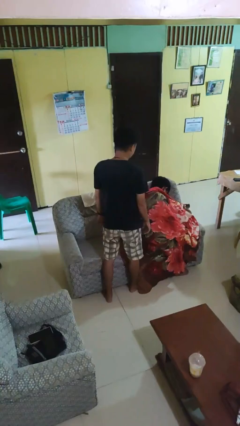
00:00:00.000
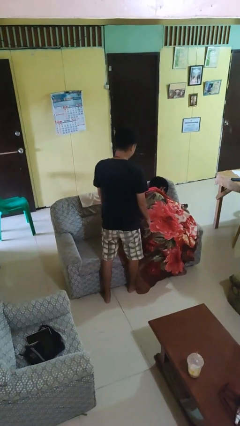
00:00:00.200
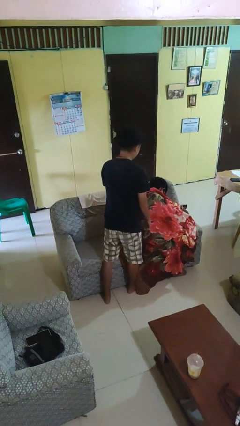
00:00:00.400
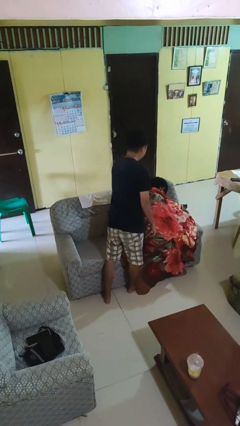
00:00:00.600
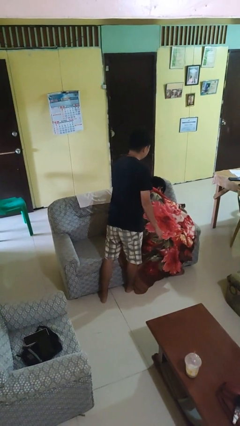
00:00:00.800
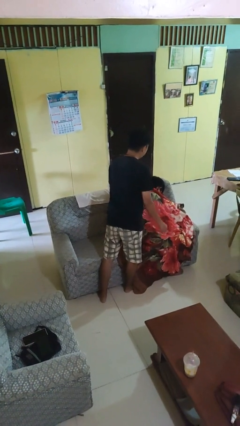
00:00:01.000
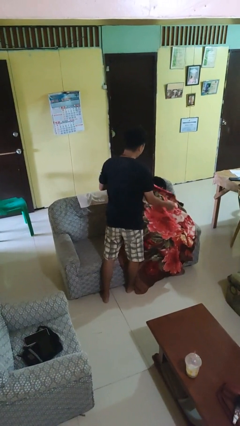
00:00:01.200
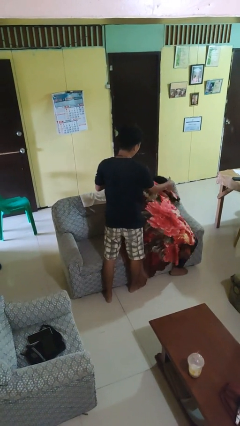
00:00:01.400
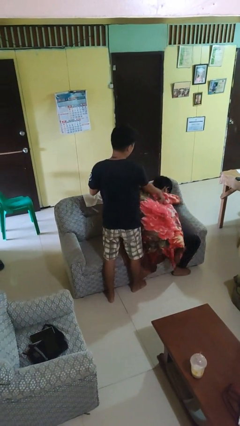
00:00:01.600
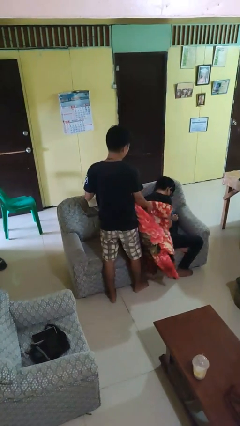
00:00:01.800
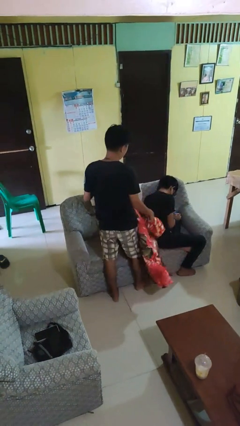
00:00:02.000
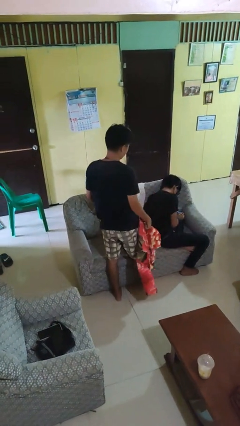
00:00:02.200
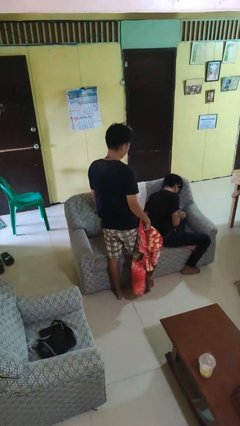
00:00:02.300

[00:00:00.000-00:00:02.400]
person uncovers friend with blanket

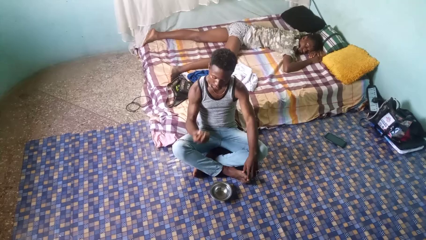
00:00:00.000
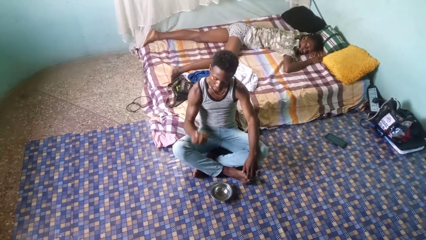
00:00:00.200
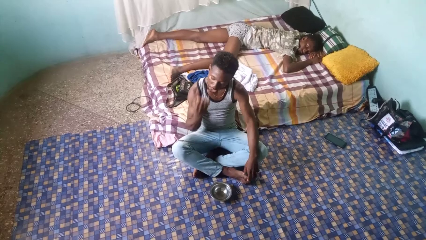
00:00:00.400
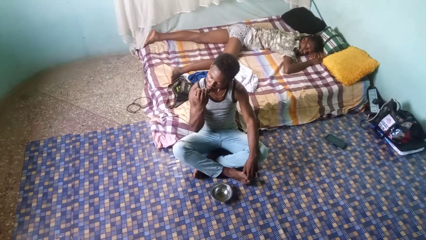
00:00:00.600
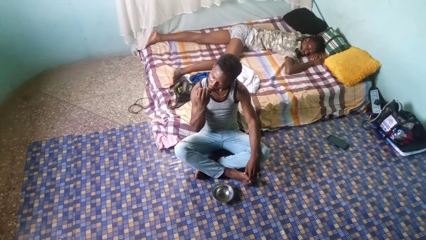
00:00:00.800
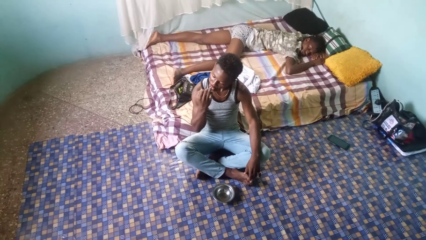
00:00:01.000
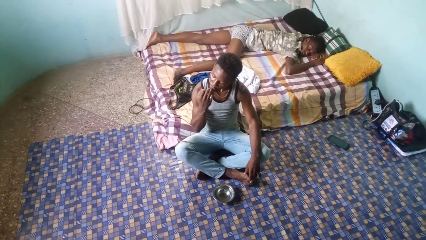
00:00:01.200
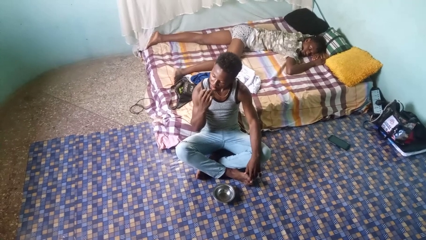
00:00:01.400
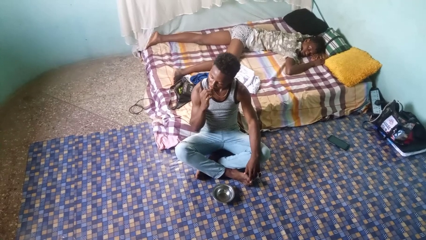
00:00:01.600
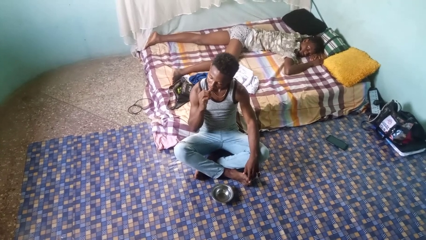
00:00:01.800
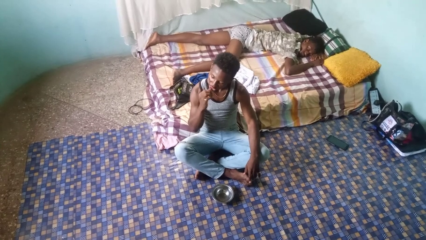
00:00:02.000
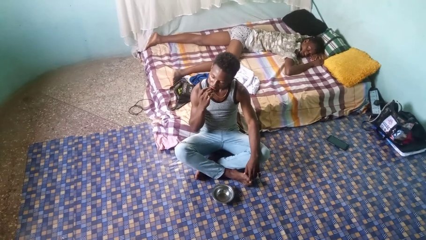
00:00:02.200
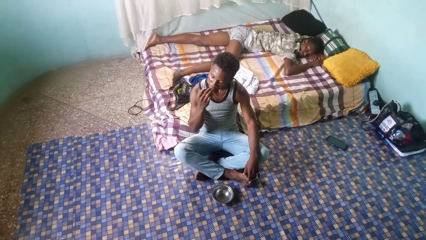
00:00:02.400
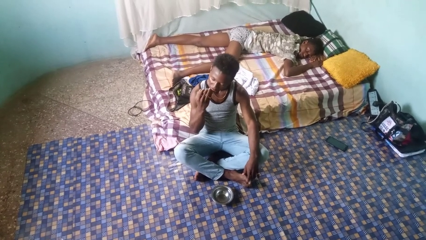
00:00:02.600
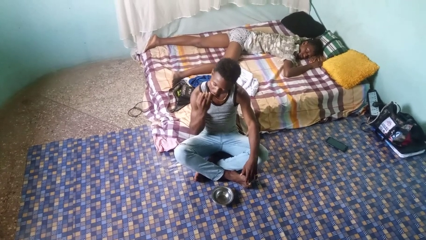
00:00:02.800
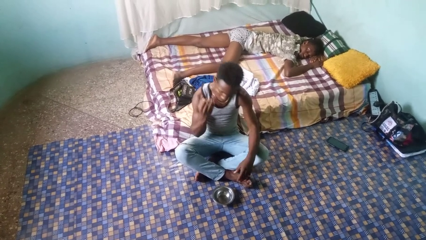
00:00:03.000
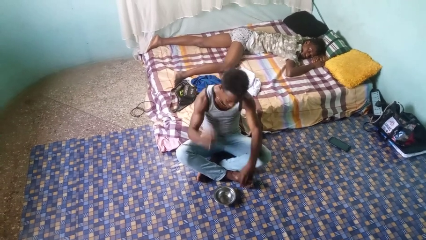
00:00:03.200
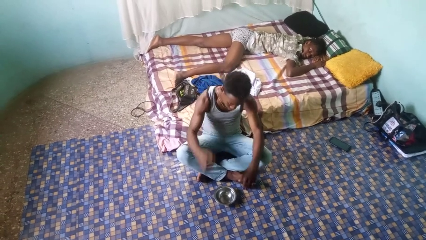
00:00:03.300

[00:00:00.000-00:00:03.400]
person licks fingers

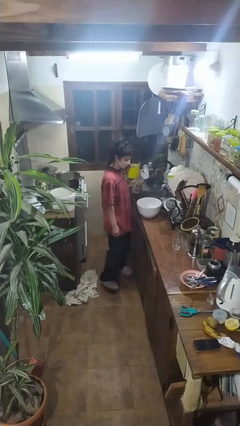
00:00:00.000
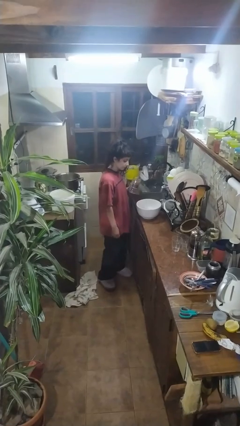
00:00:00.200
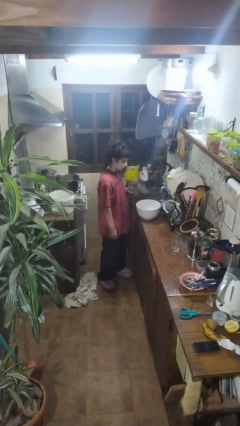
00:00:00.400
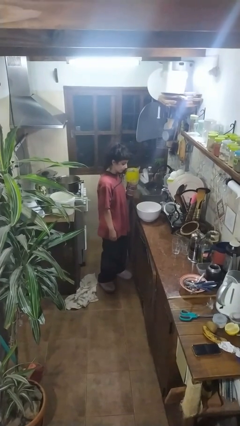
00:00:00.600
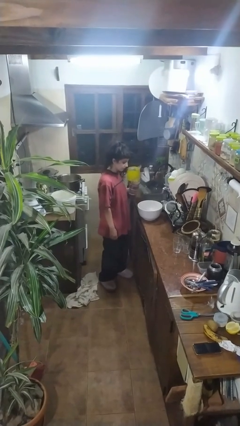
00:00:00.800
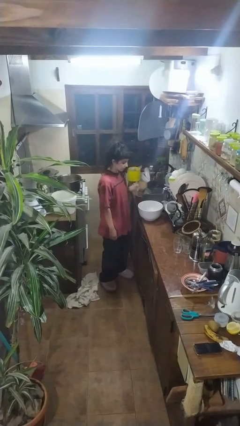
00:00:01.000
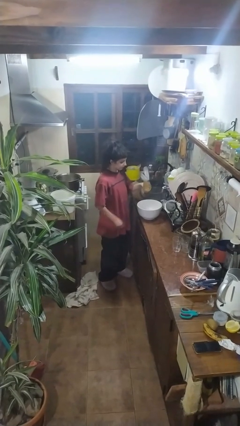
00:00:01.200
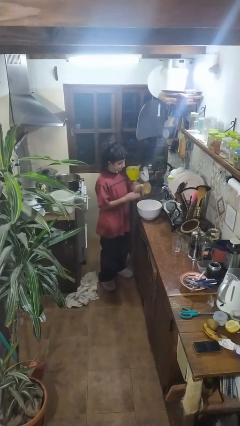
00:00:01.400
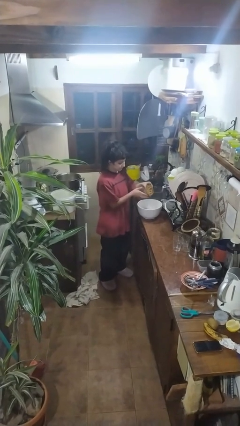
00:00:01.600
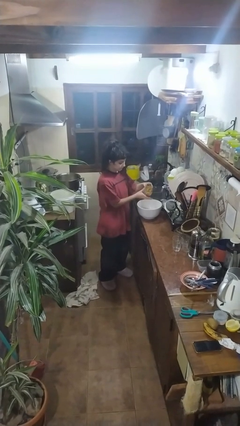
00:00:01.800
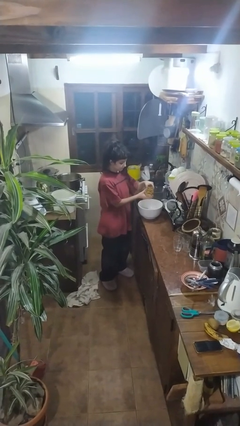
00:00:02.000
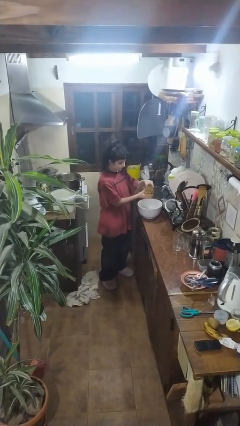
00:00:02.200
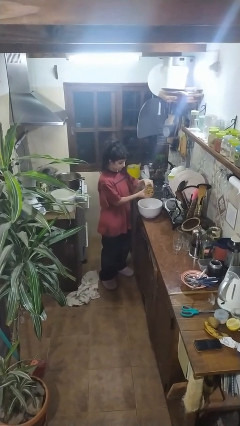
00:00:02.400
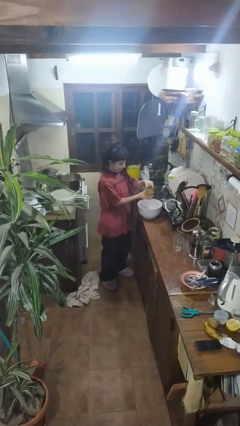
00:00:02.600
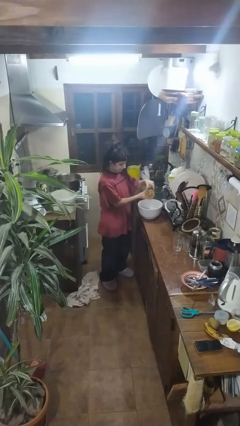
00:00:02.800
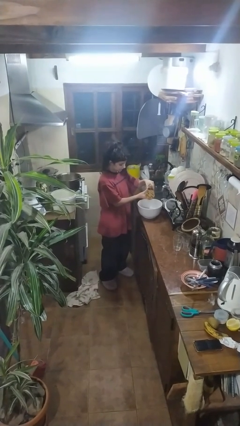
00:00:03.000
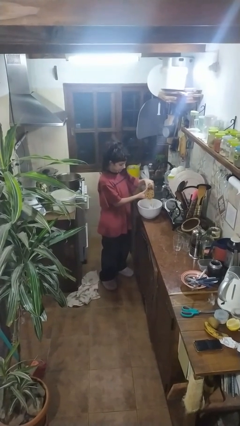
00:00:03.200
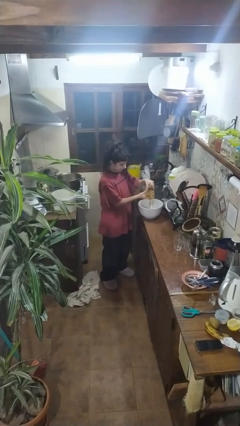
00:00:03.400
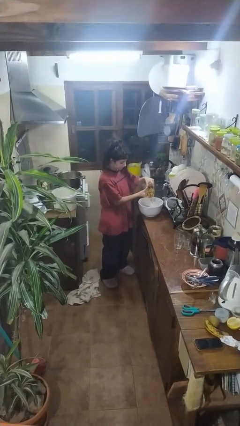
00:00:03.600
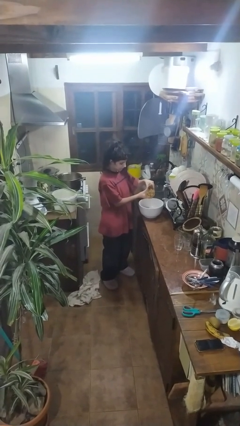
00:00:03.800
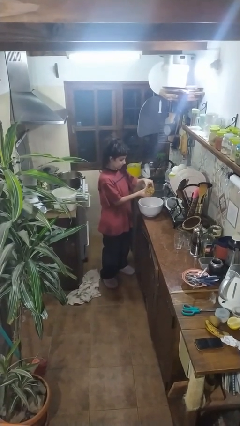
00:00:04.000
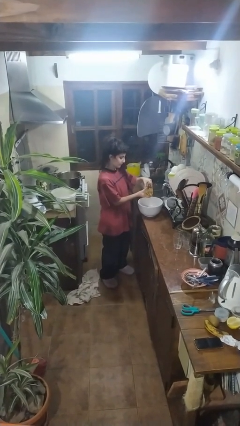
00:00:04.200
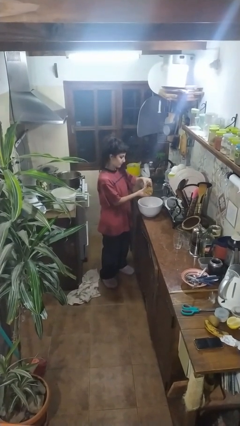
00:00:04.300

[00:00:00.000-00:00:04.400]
person pours into bowl

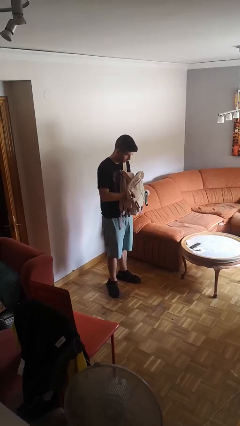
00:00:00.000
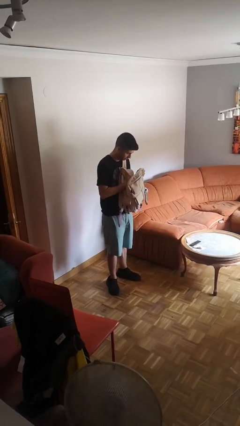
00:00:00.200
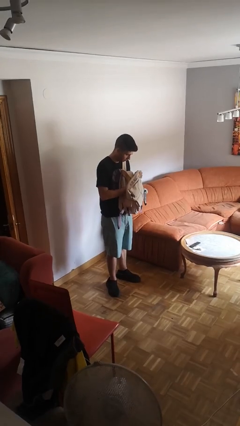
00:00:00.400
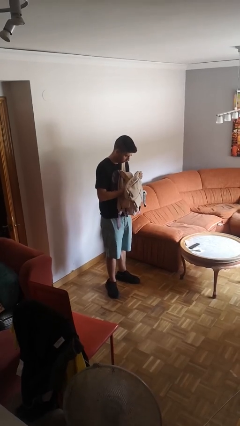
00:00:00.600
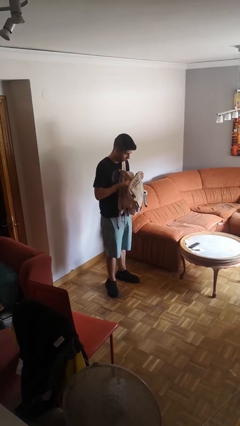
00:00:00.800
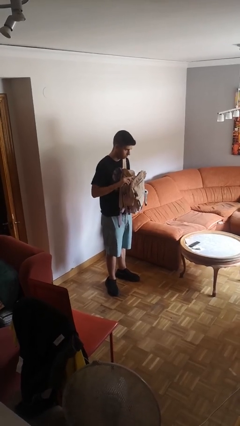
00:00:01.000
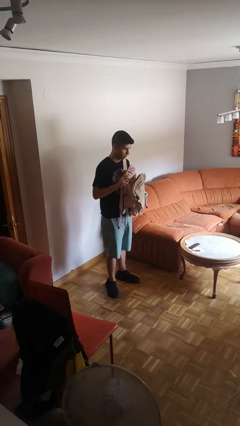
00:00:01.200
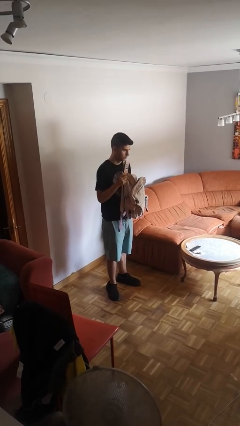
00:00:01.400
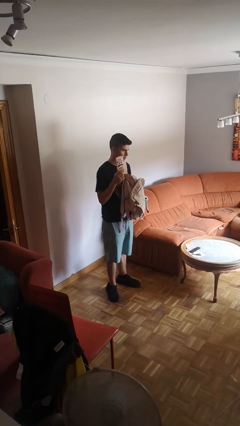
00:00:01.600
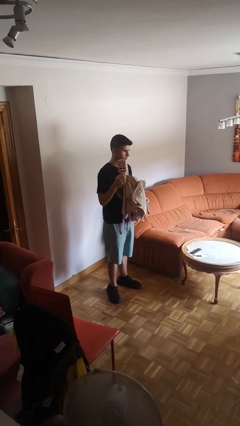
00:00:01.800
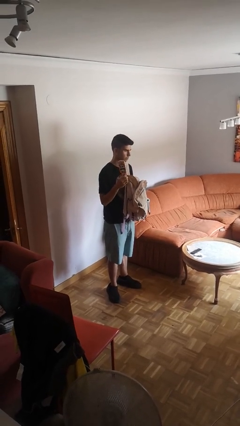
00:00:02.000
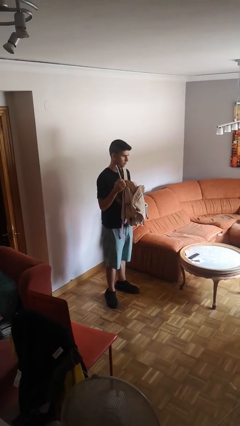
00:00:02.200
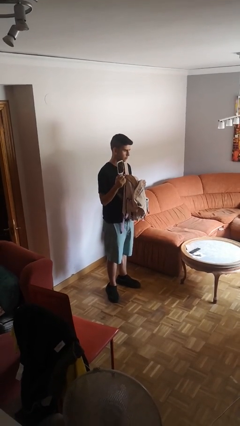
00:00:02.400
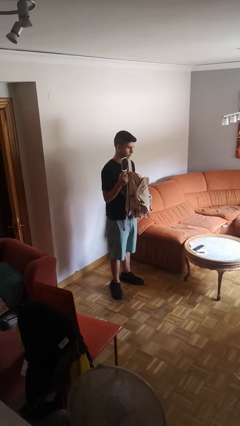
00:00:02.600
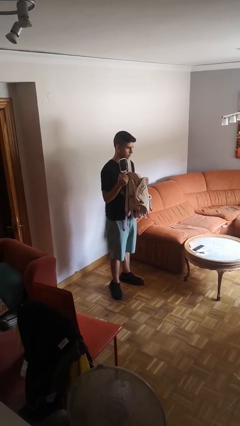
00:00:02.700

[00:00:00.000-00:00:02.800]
person takes object from backpack

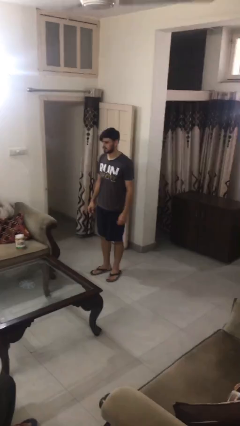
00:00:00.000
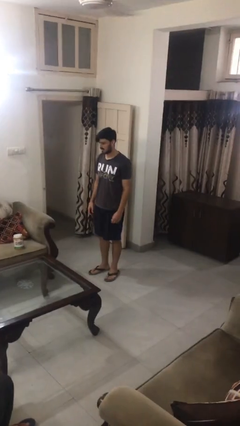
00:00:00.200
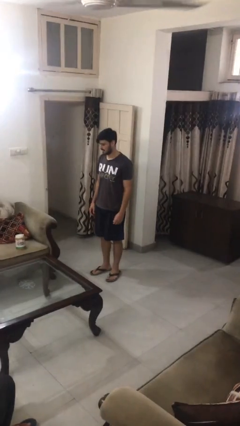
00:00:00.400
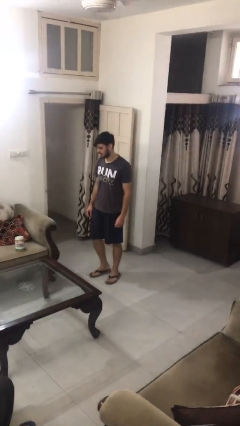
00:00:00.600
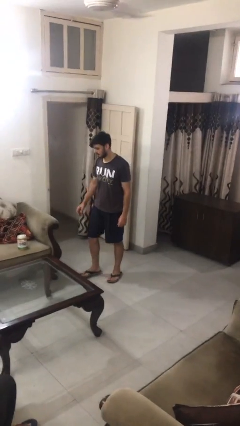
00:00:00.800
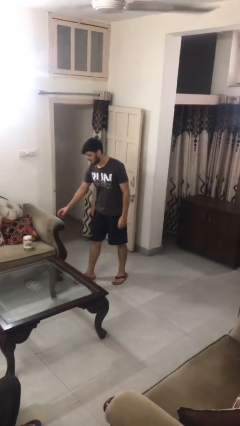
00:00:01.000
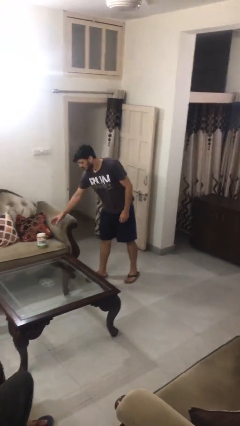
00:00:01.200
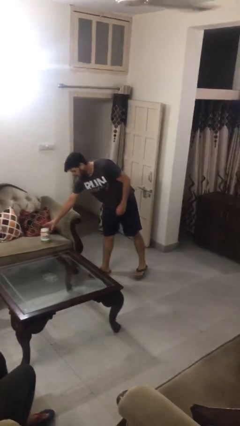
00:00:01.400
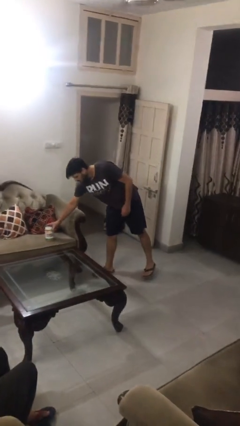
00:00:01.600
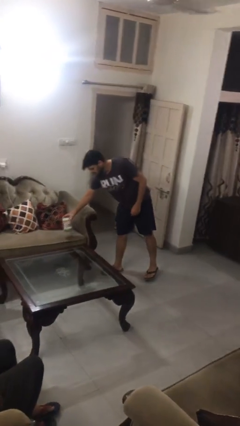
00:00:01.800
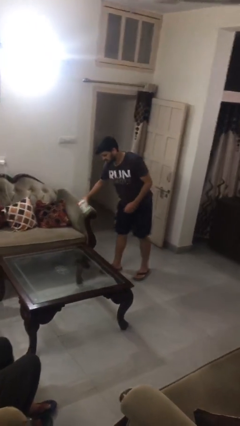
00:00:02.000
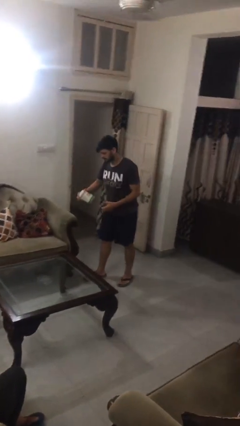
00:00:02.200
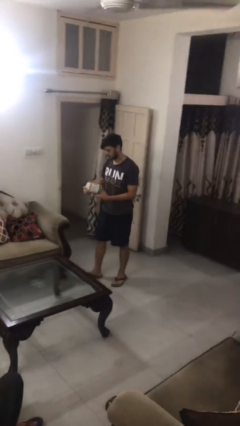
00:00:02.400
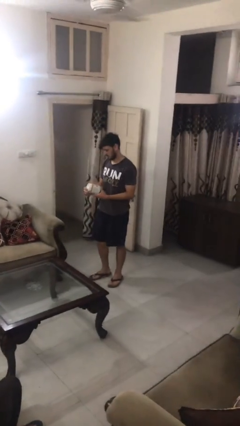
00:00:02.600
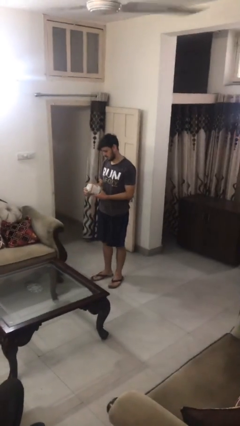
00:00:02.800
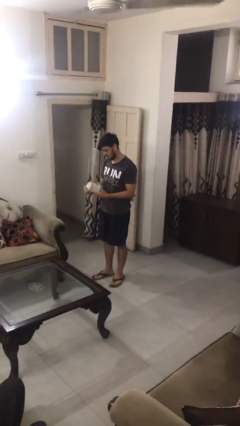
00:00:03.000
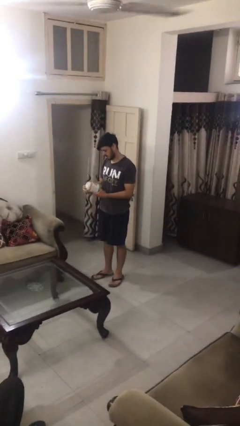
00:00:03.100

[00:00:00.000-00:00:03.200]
person picks up object from couch

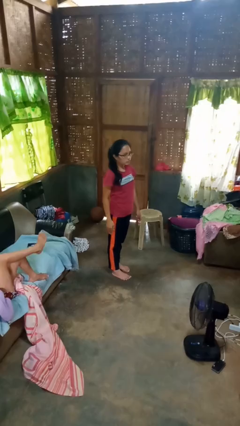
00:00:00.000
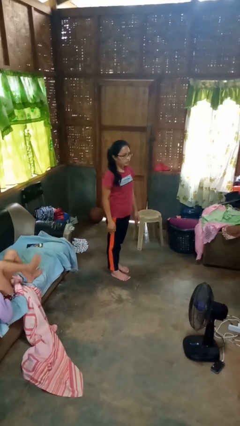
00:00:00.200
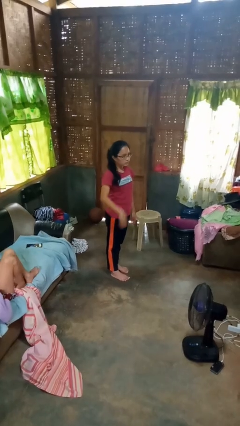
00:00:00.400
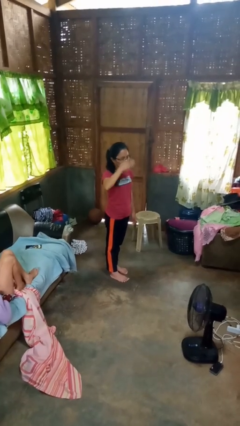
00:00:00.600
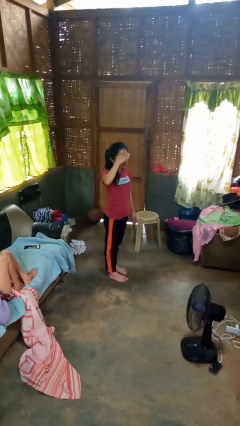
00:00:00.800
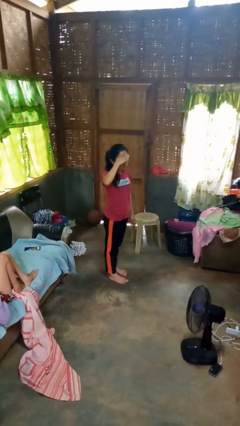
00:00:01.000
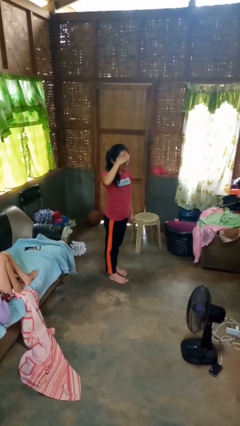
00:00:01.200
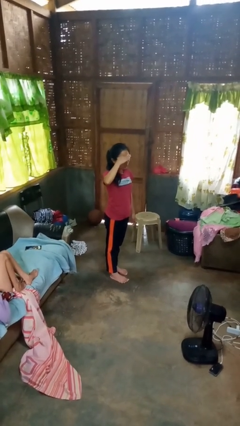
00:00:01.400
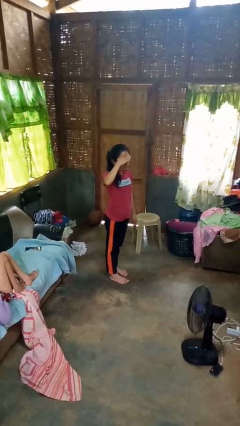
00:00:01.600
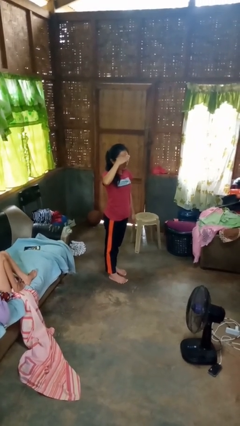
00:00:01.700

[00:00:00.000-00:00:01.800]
person salutes
